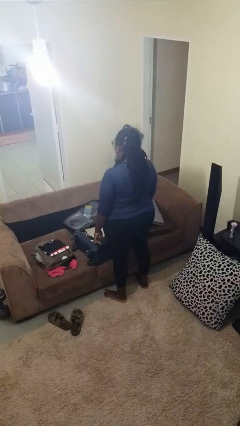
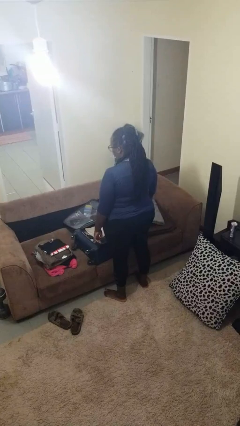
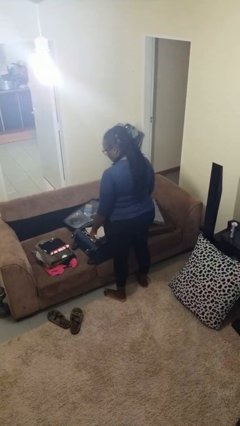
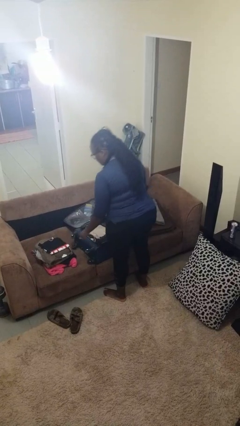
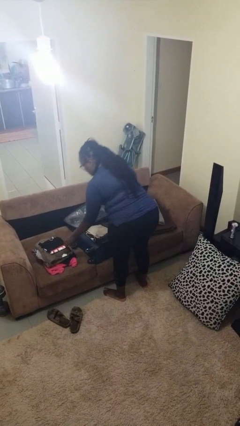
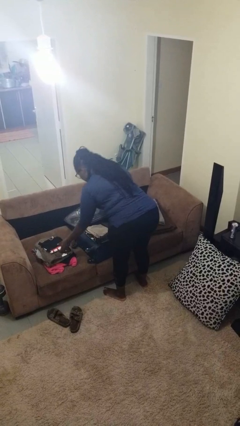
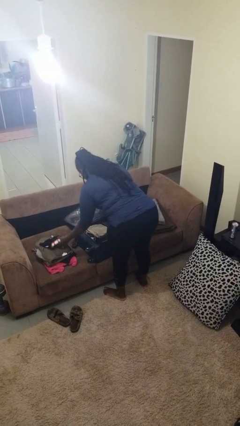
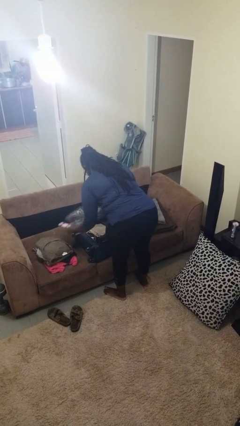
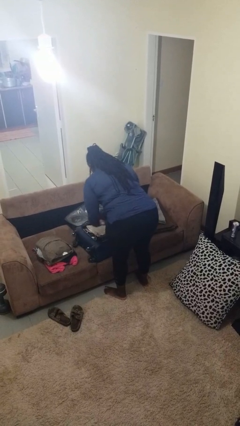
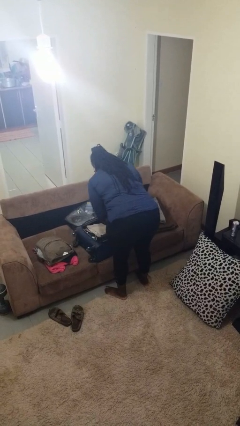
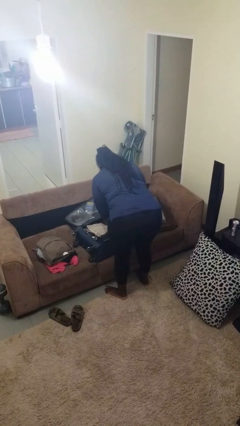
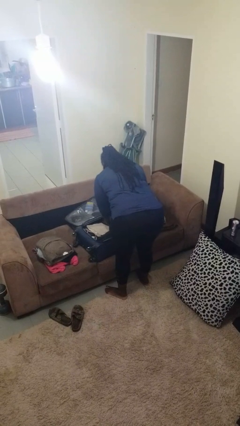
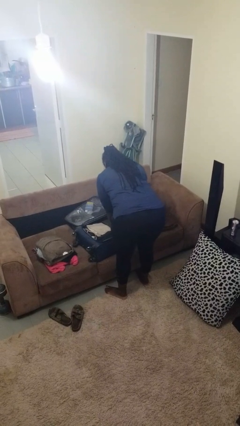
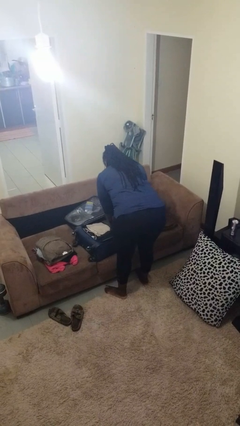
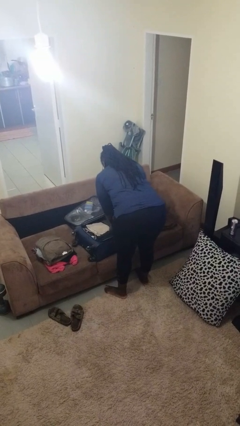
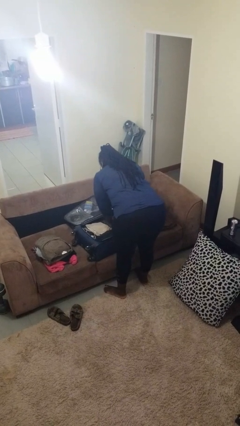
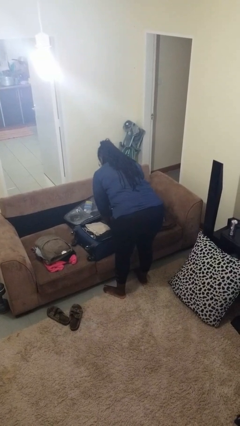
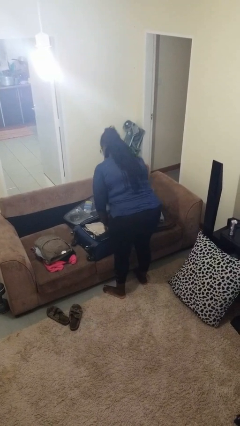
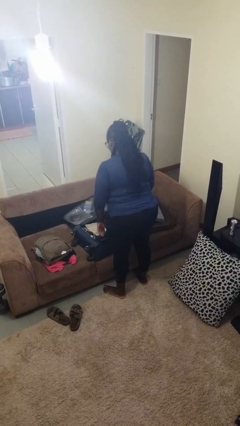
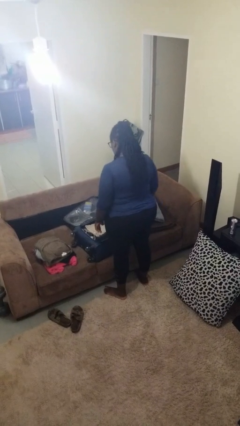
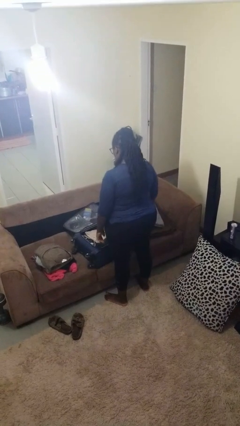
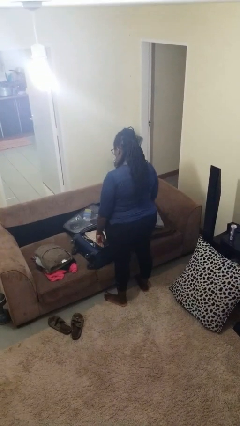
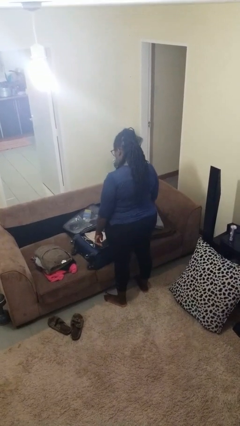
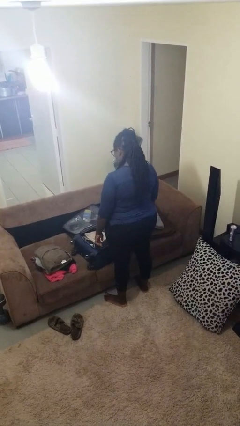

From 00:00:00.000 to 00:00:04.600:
person loads clothes into suitcase

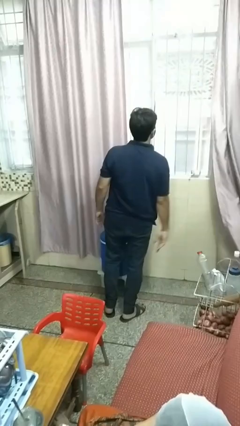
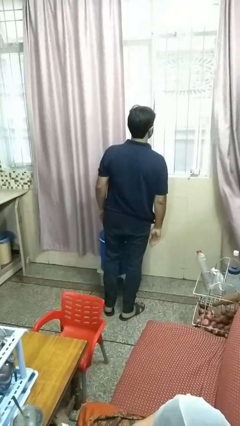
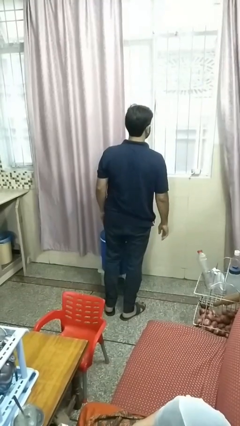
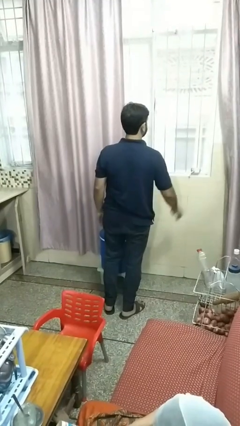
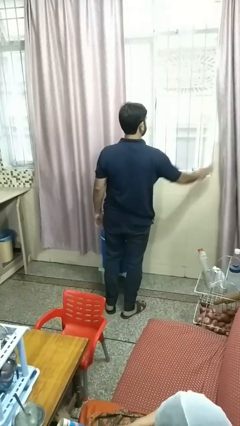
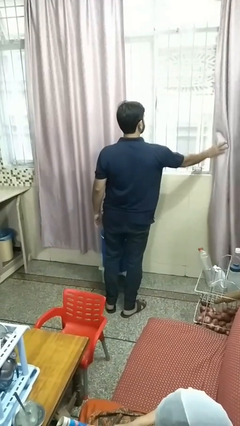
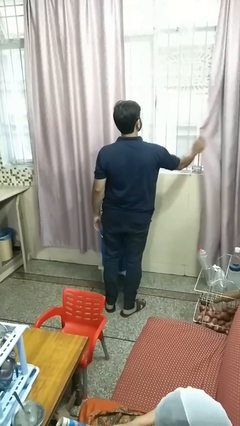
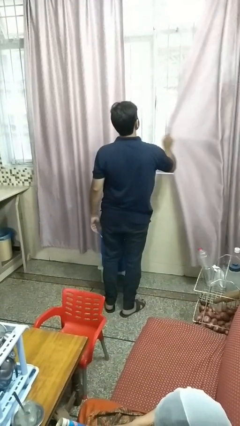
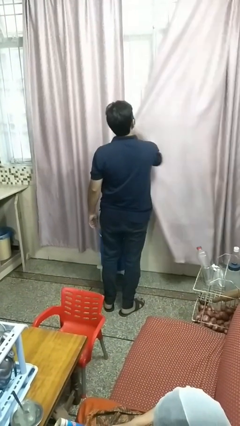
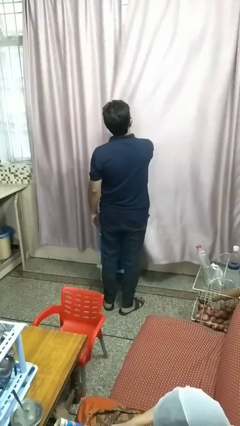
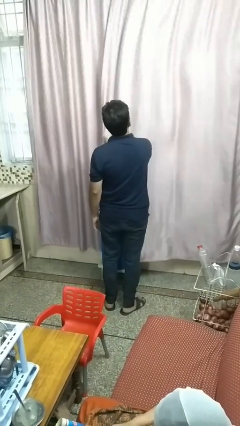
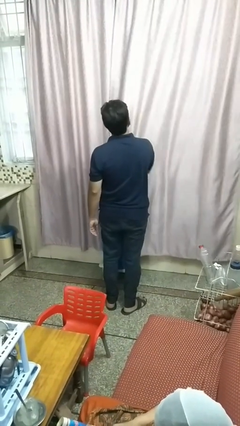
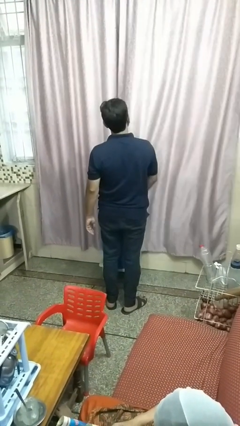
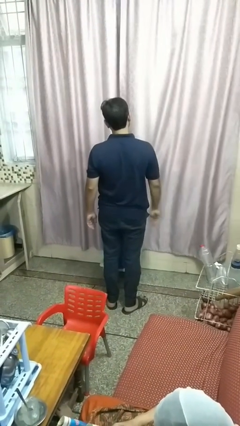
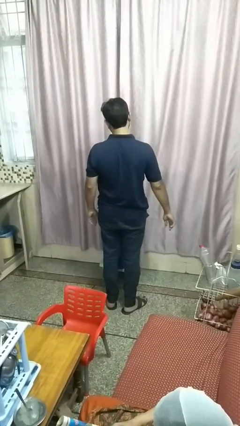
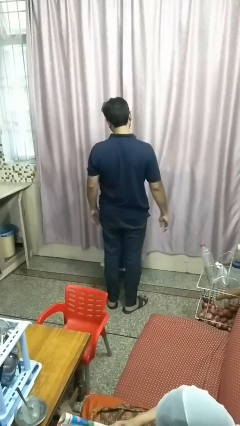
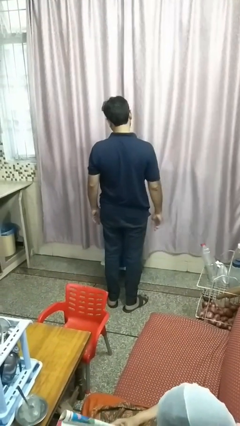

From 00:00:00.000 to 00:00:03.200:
person closes curtains

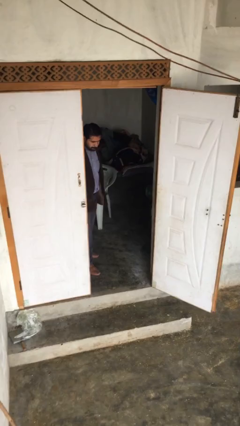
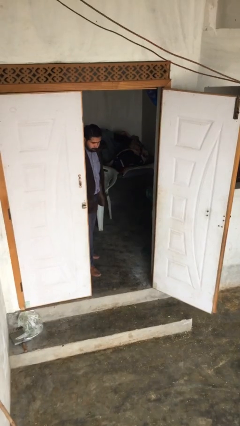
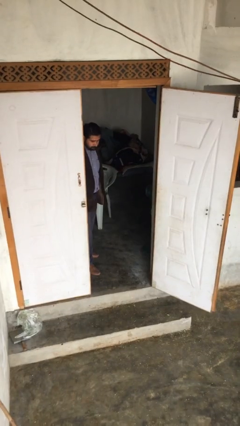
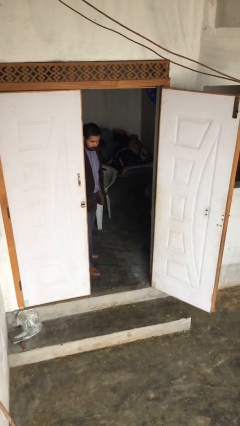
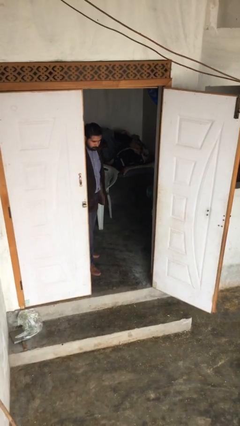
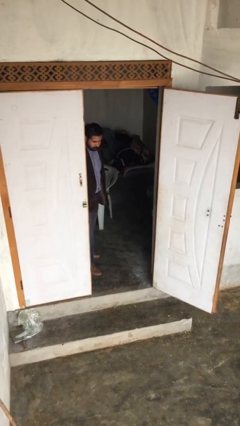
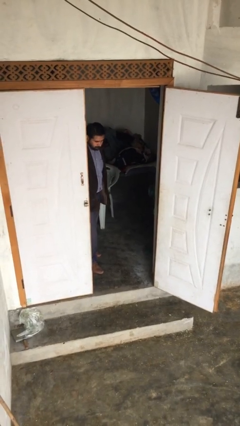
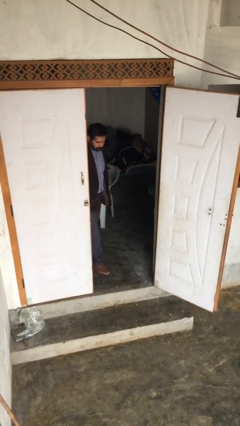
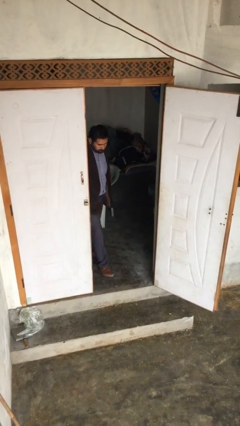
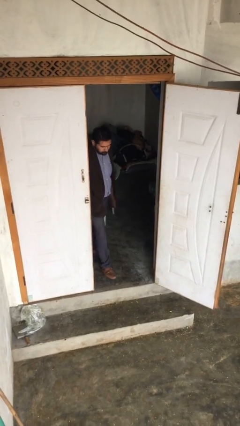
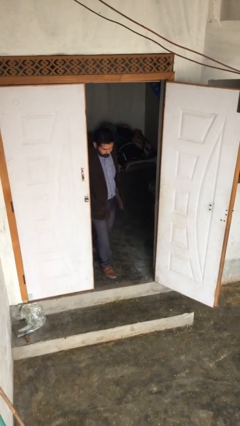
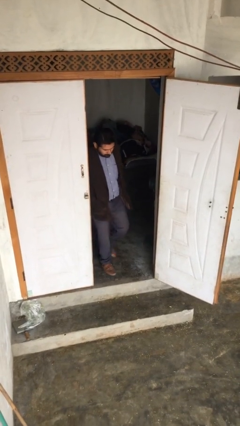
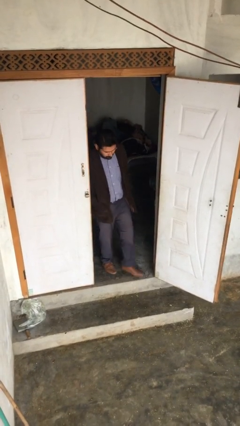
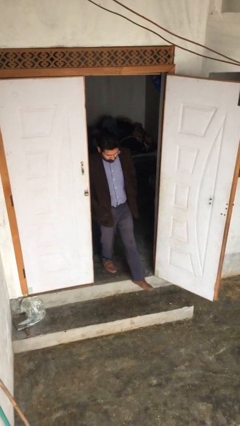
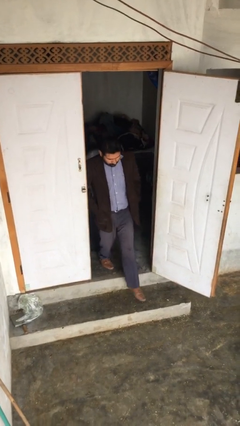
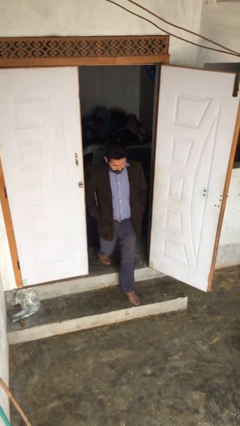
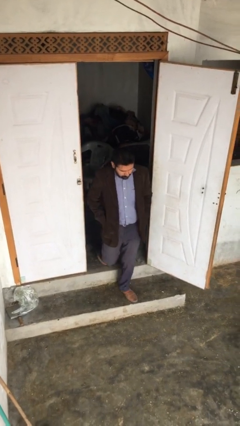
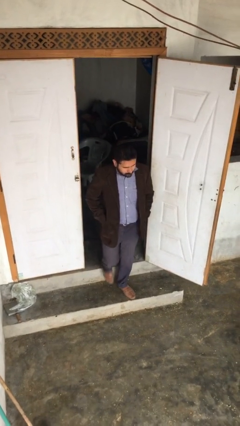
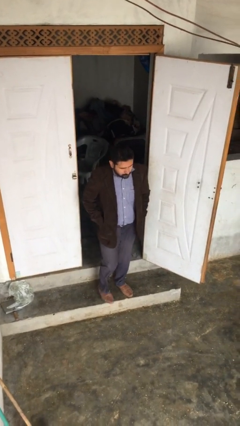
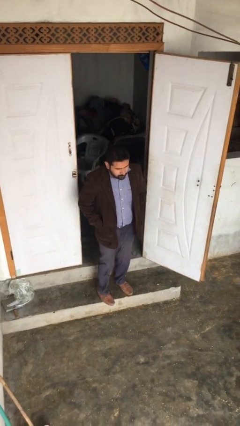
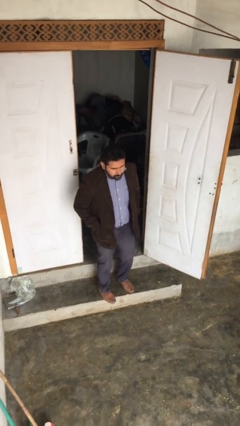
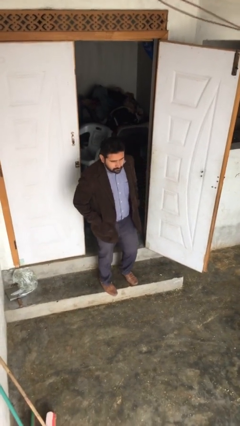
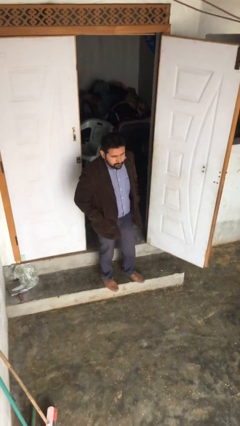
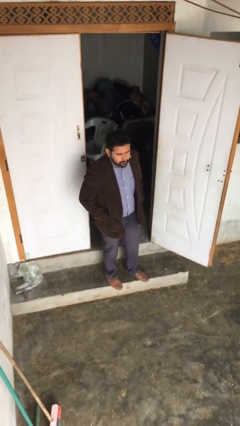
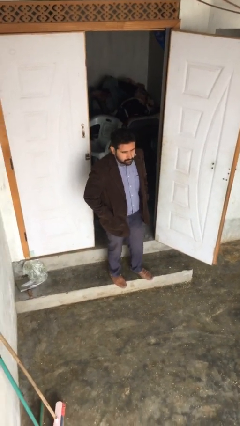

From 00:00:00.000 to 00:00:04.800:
person enters scene through structure

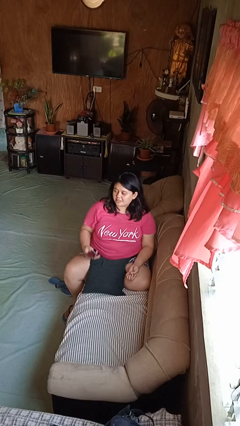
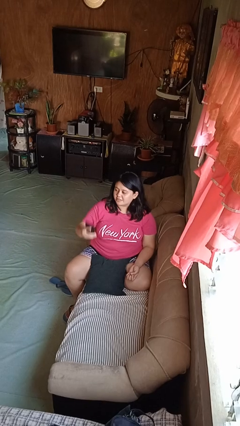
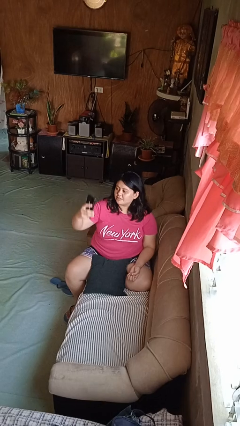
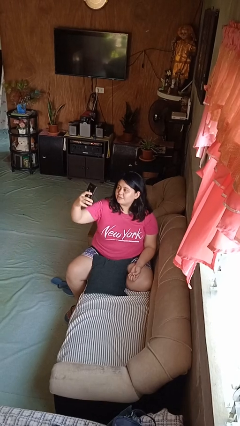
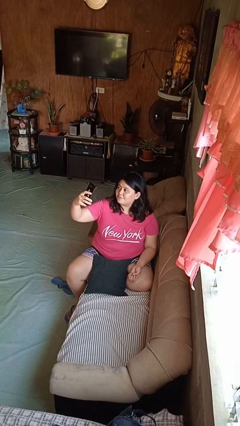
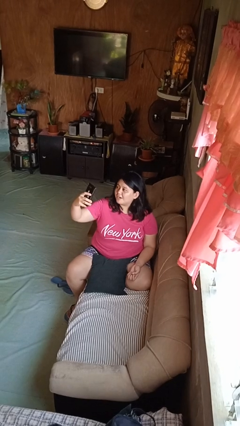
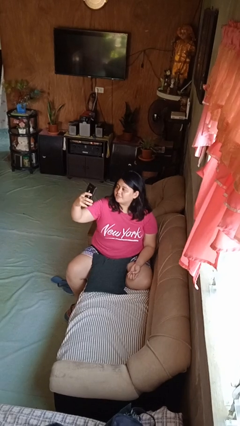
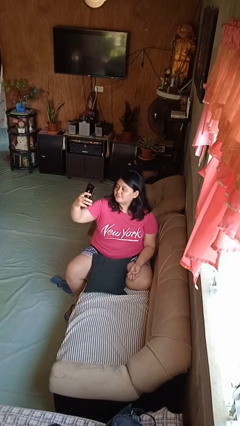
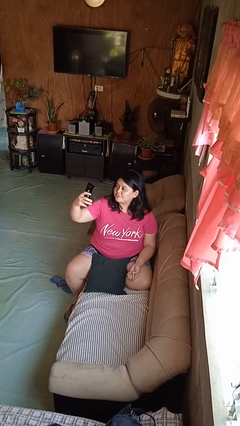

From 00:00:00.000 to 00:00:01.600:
person takes selfie

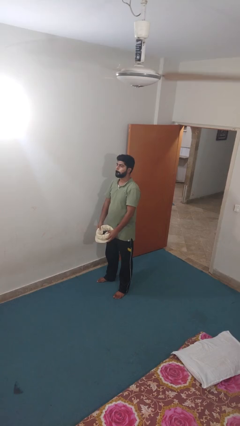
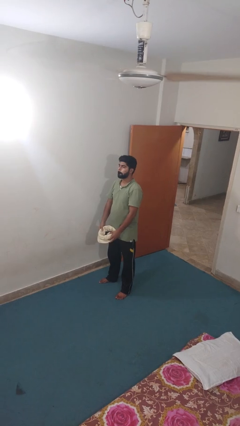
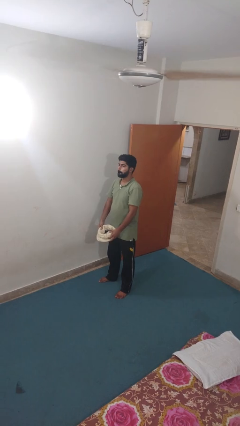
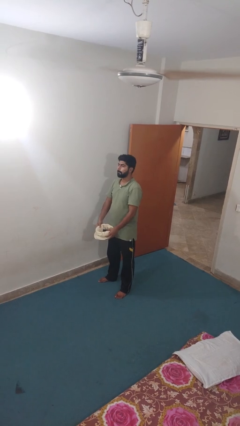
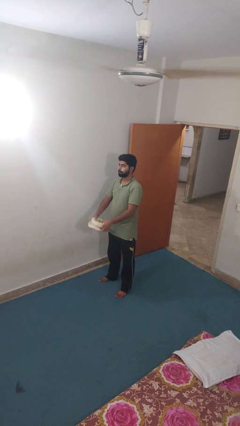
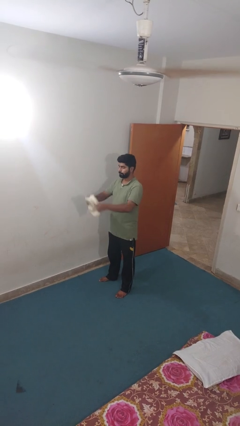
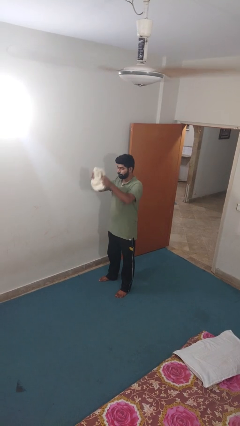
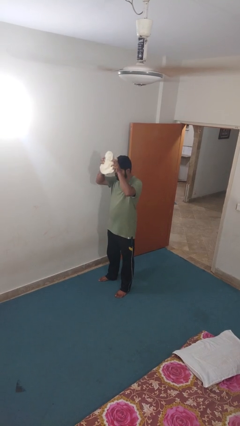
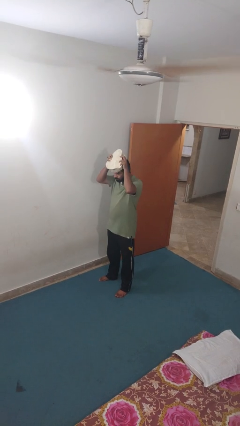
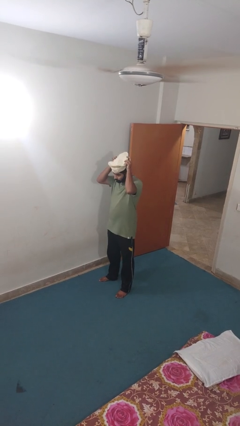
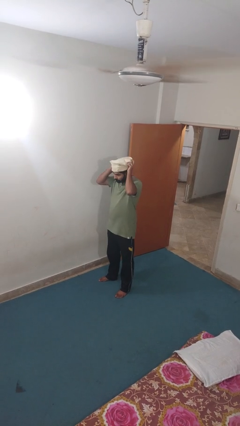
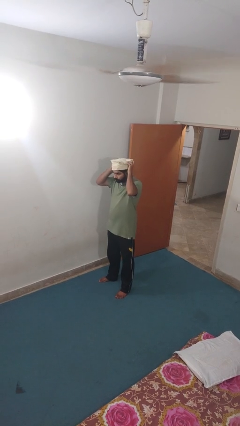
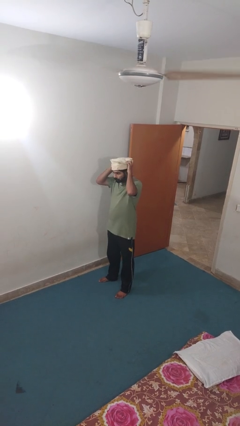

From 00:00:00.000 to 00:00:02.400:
person puts on hat

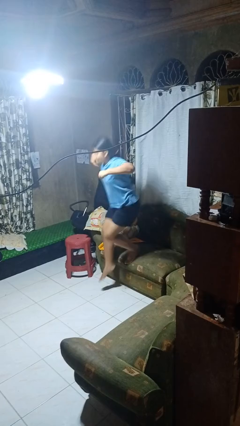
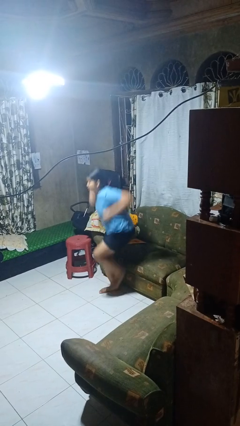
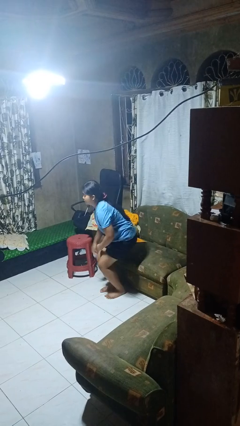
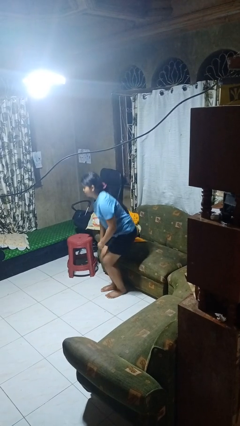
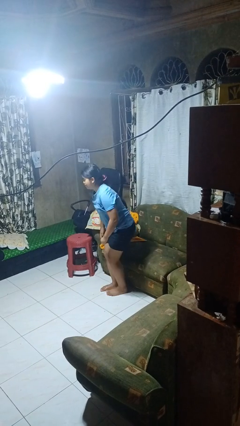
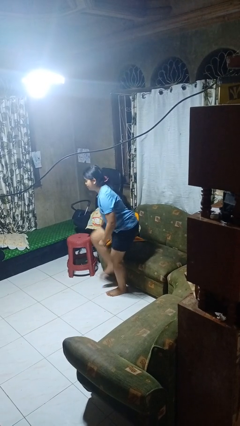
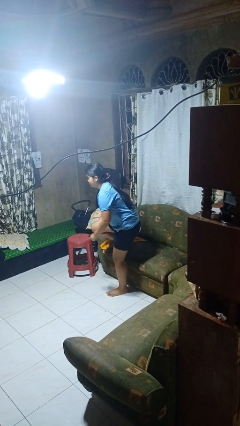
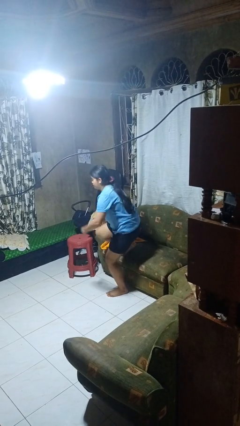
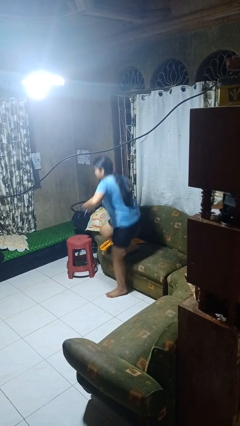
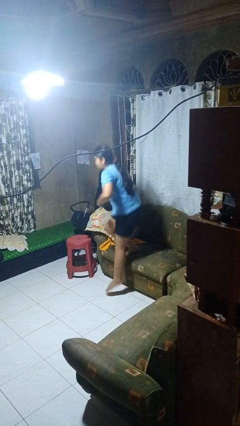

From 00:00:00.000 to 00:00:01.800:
person jumps on couch
